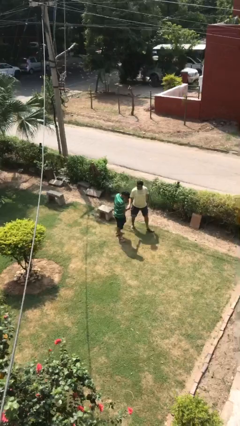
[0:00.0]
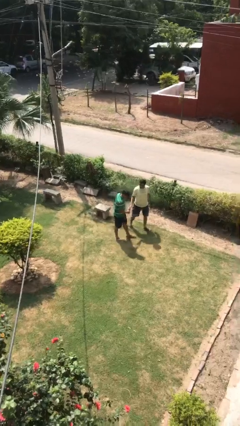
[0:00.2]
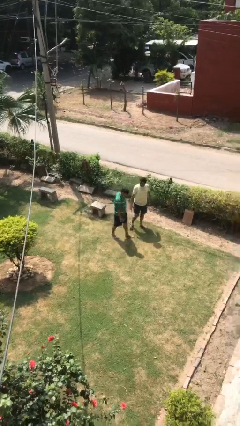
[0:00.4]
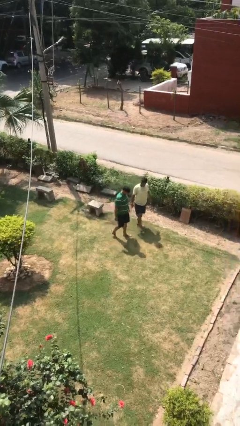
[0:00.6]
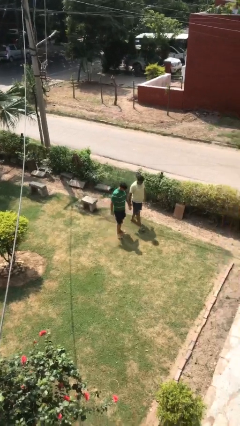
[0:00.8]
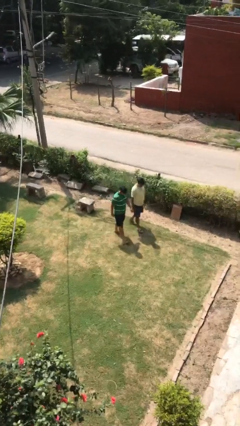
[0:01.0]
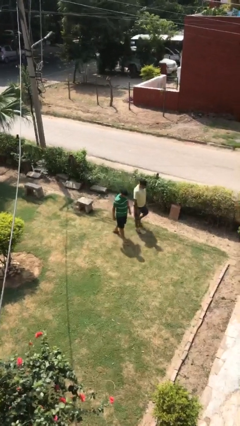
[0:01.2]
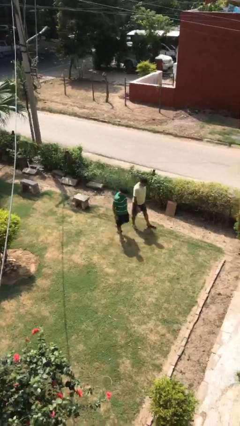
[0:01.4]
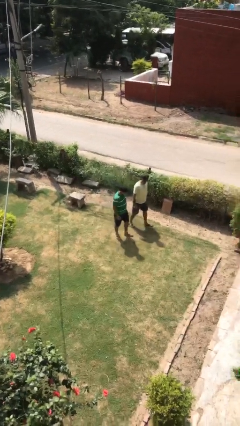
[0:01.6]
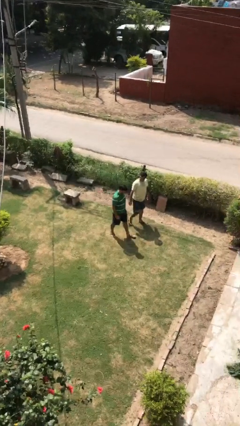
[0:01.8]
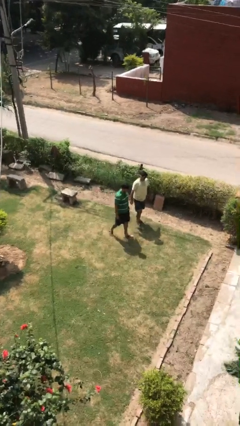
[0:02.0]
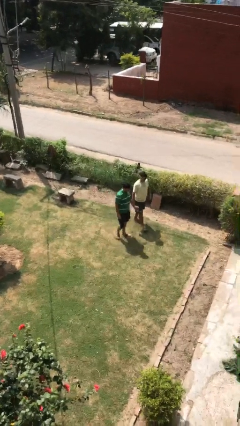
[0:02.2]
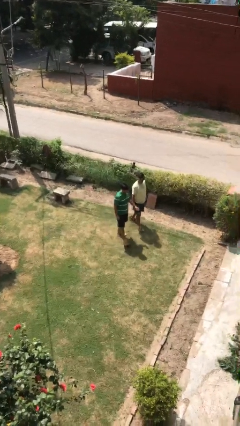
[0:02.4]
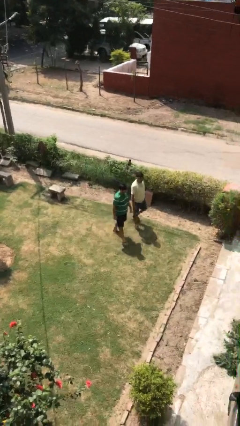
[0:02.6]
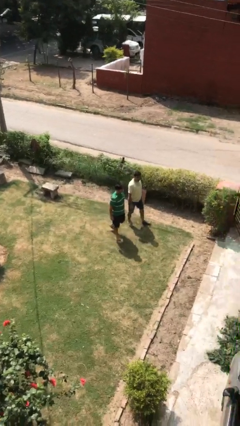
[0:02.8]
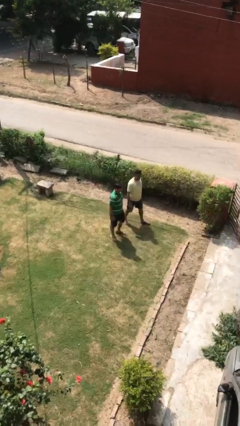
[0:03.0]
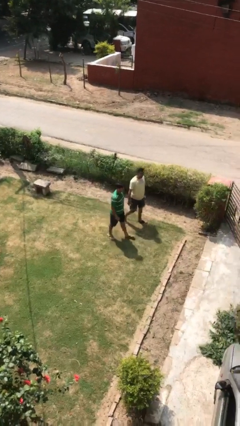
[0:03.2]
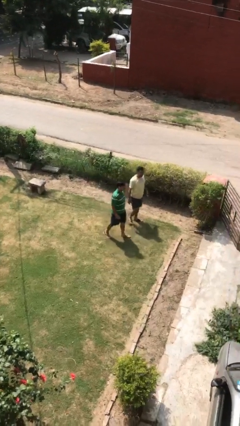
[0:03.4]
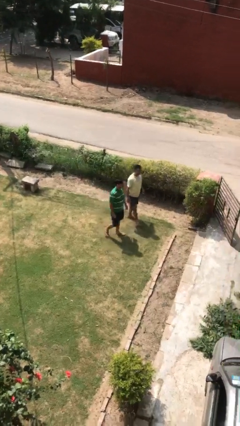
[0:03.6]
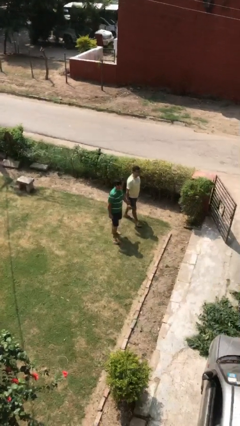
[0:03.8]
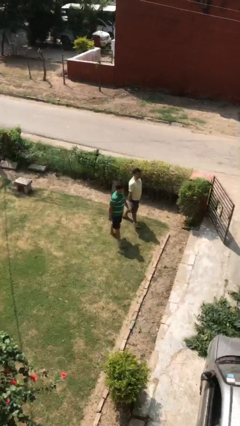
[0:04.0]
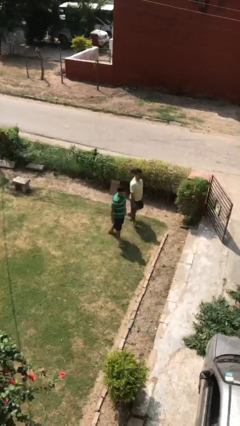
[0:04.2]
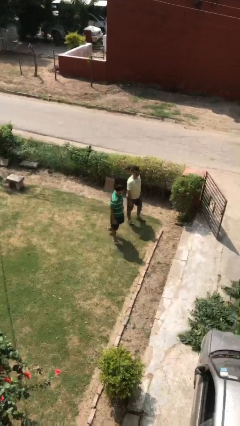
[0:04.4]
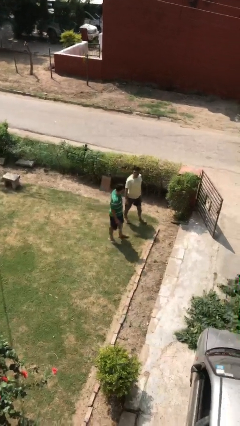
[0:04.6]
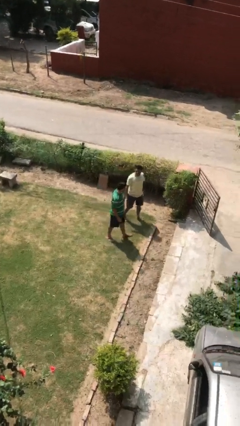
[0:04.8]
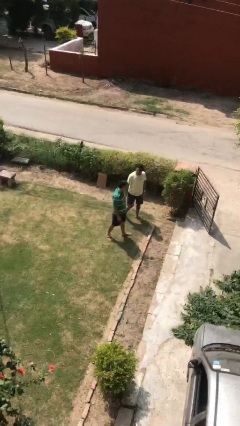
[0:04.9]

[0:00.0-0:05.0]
person talks to person

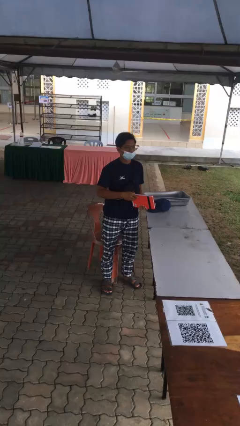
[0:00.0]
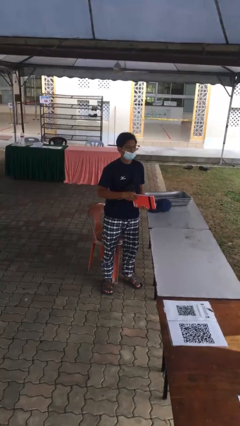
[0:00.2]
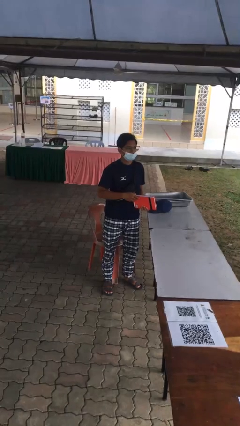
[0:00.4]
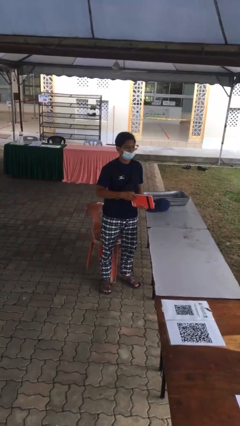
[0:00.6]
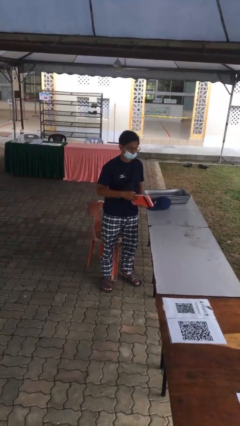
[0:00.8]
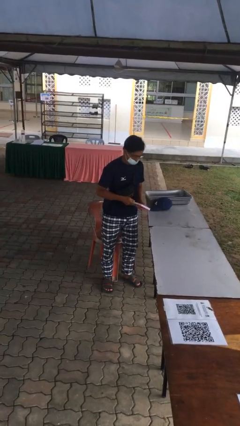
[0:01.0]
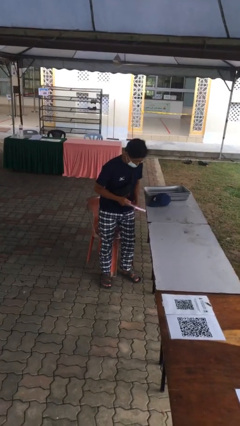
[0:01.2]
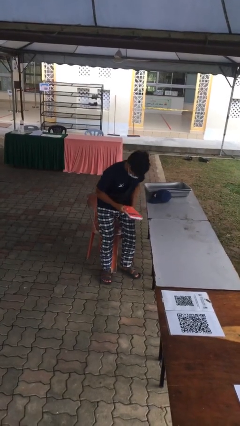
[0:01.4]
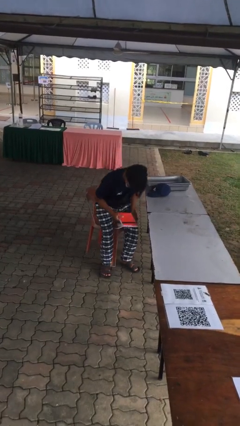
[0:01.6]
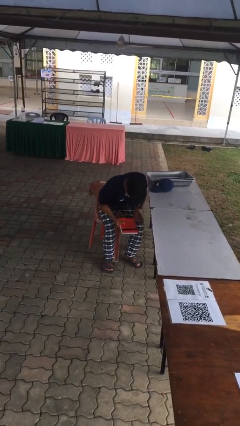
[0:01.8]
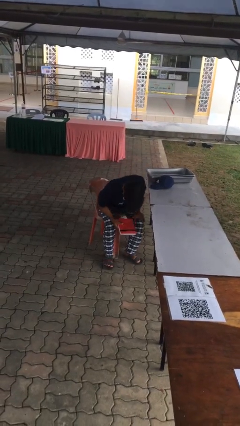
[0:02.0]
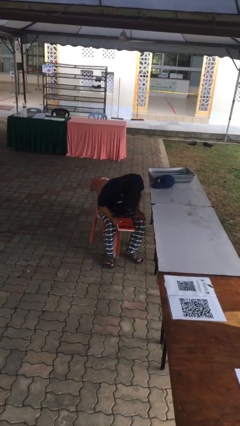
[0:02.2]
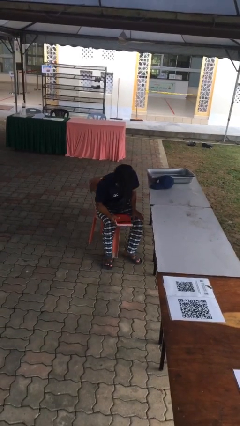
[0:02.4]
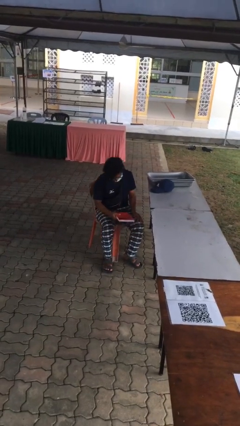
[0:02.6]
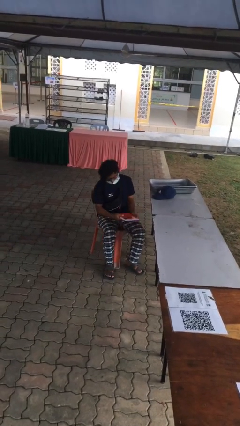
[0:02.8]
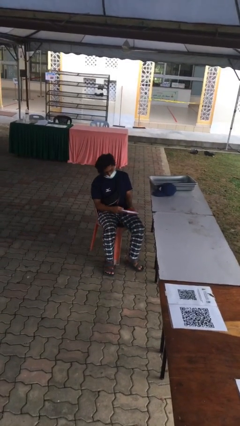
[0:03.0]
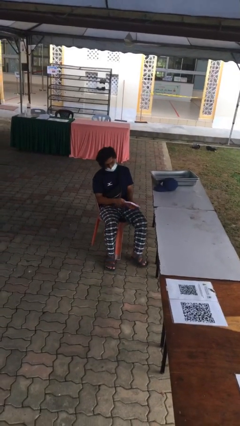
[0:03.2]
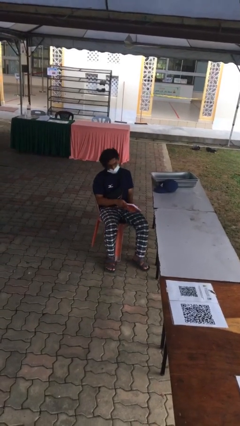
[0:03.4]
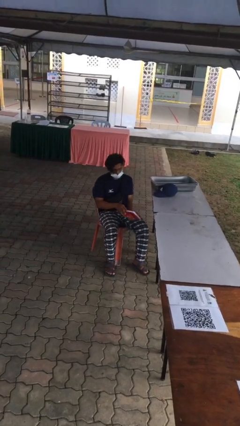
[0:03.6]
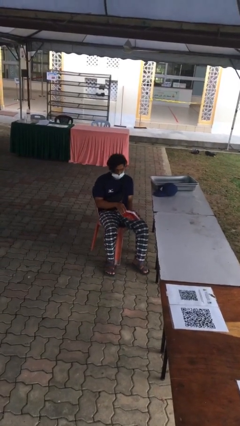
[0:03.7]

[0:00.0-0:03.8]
person sits down

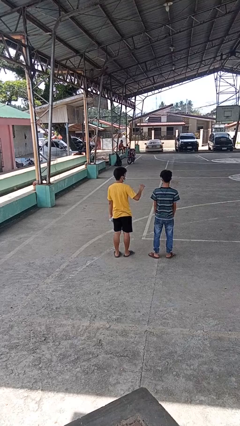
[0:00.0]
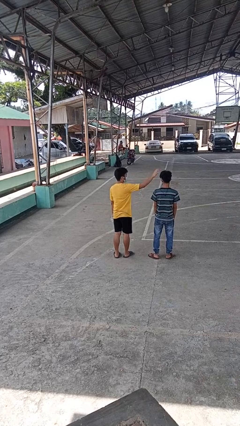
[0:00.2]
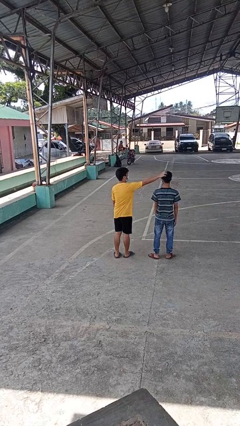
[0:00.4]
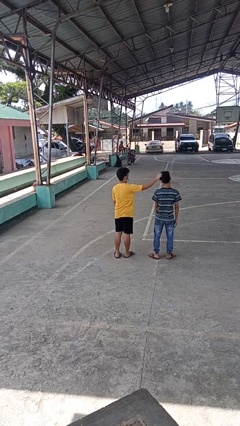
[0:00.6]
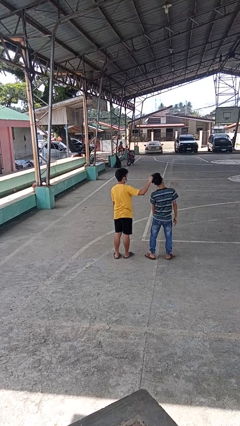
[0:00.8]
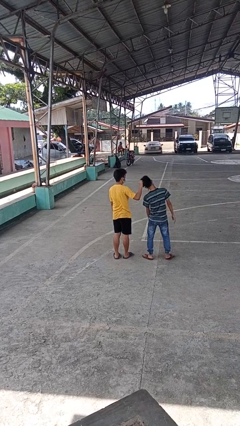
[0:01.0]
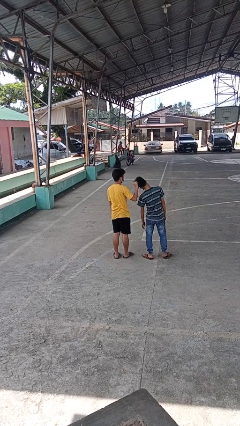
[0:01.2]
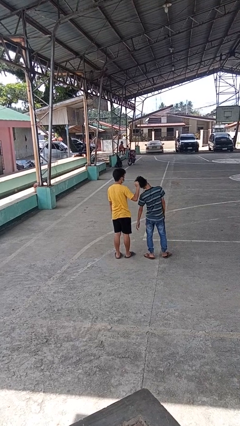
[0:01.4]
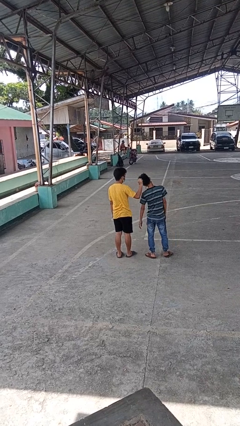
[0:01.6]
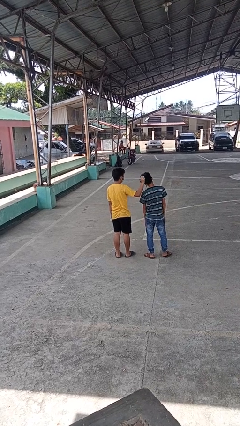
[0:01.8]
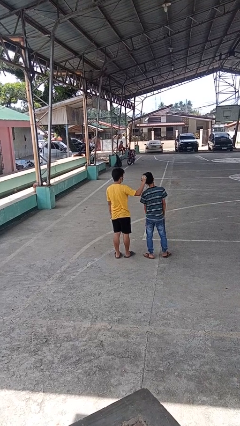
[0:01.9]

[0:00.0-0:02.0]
person grabs person by hair

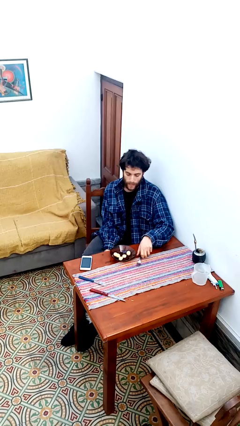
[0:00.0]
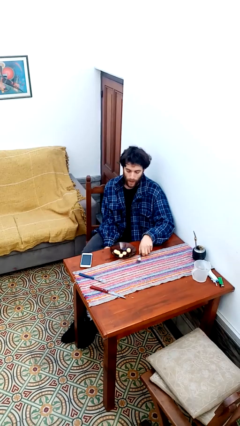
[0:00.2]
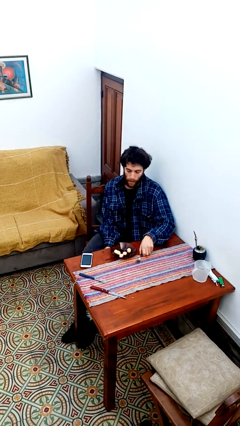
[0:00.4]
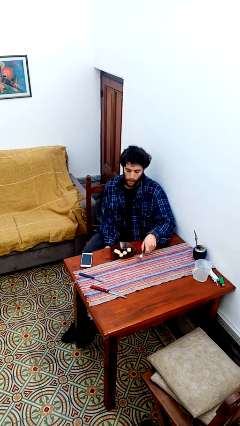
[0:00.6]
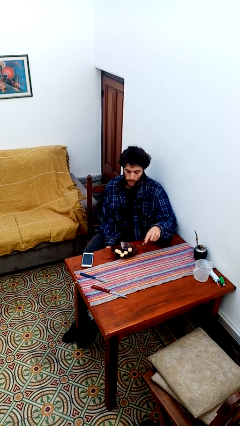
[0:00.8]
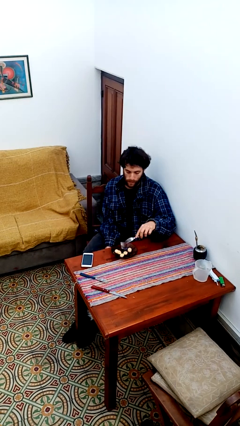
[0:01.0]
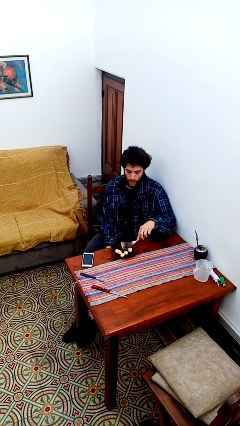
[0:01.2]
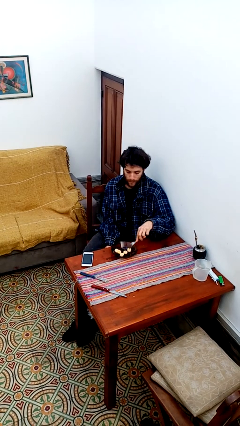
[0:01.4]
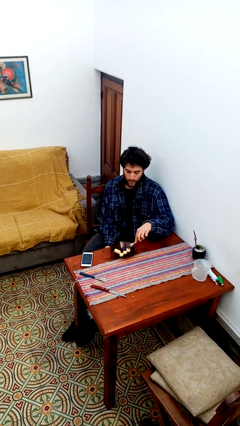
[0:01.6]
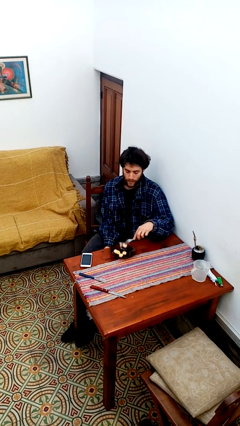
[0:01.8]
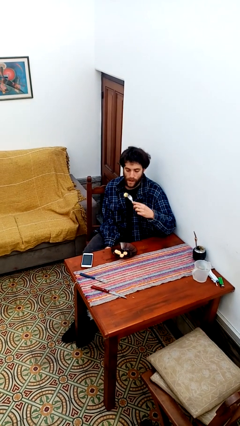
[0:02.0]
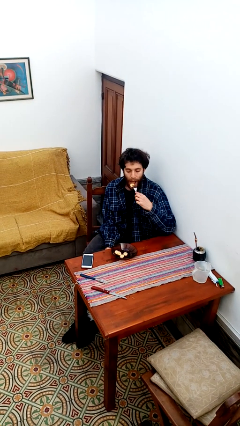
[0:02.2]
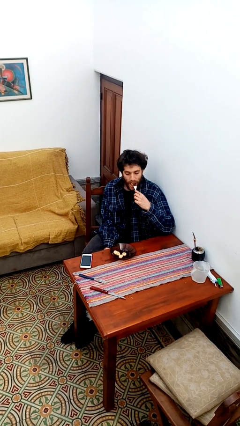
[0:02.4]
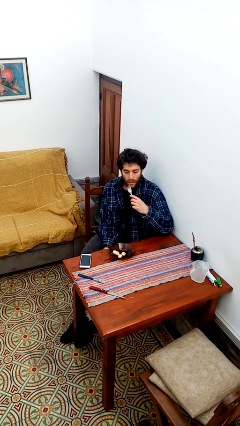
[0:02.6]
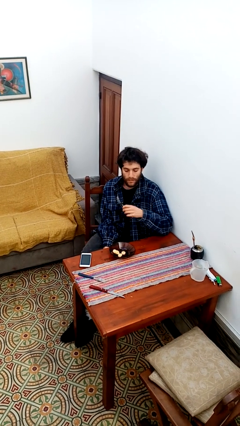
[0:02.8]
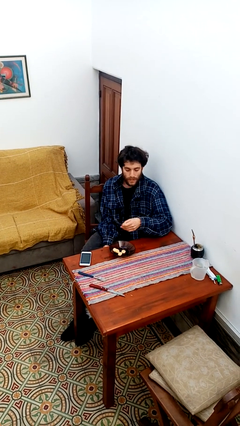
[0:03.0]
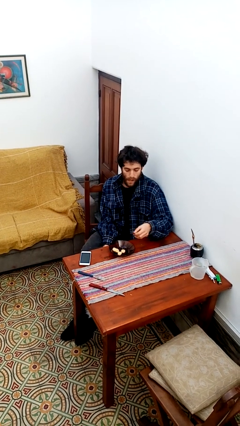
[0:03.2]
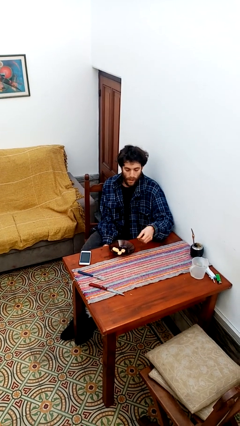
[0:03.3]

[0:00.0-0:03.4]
person eats with utensil

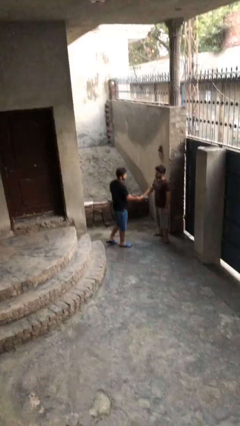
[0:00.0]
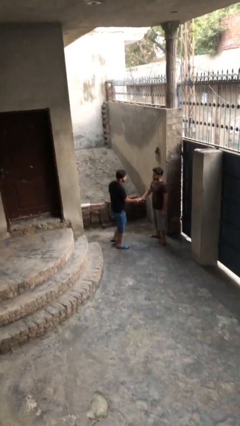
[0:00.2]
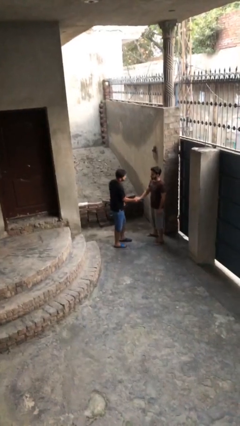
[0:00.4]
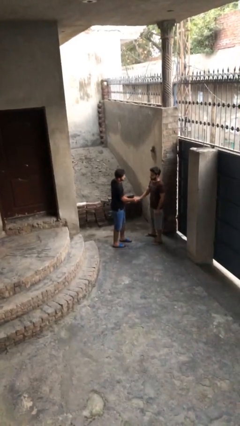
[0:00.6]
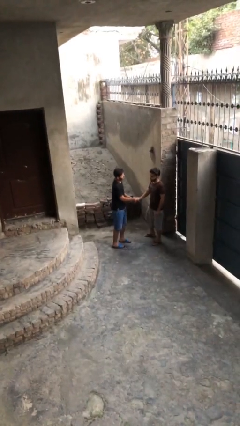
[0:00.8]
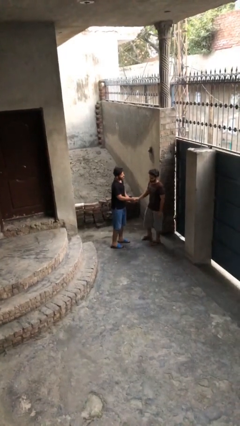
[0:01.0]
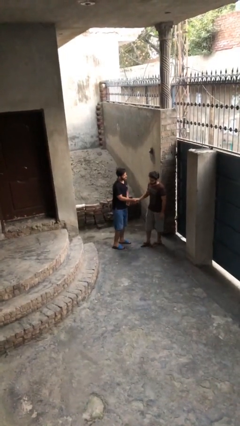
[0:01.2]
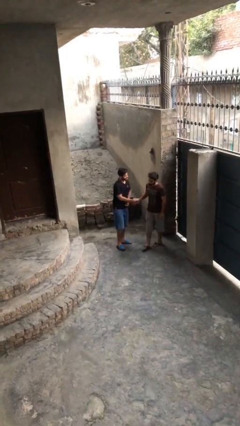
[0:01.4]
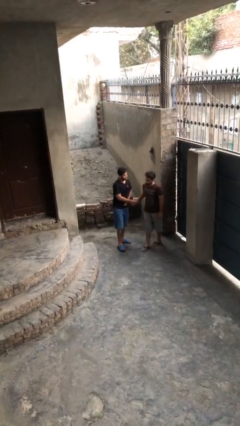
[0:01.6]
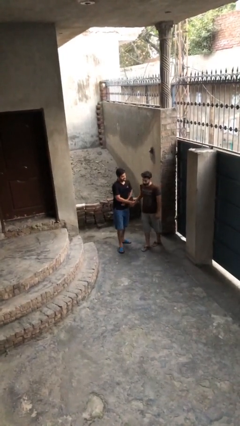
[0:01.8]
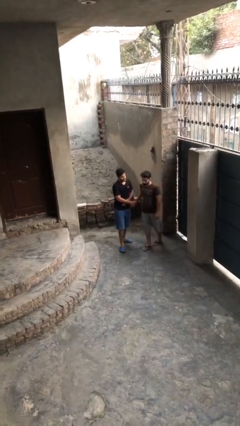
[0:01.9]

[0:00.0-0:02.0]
person shakes hand

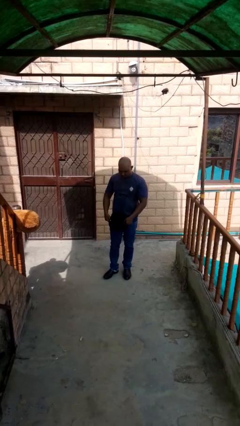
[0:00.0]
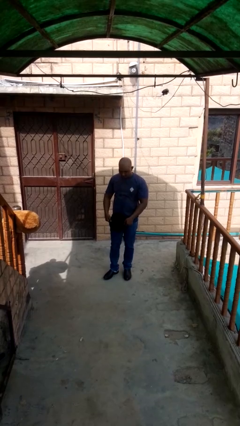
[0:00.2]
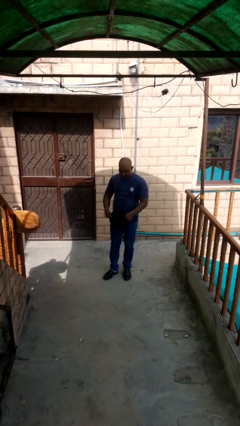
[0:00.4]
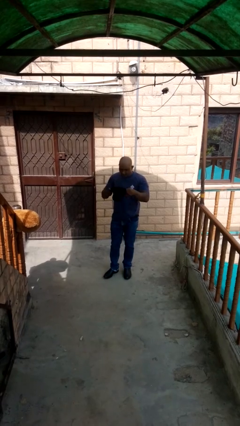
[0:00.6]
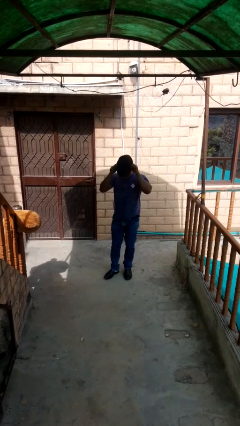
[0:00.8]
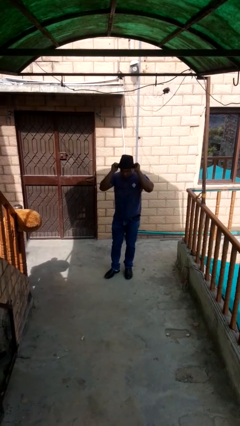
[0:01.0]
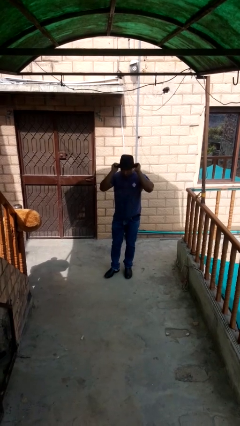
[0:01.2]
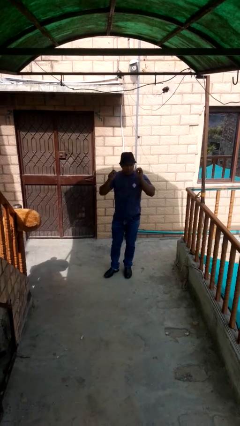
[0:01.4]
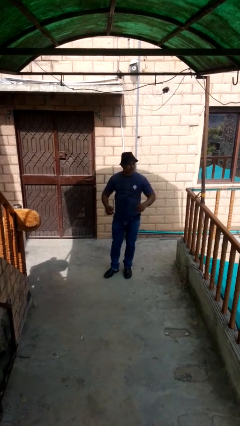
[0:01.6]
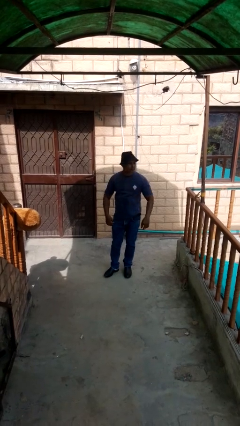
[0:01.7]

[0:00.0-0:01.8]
person puts on hat
